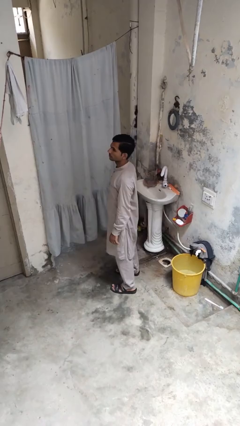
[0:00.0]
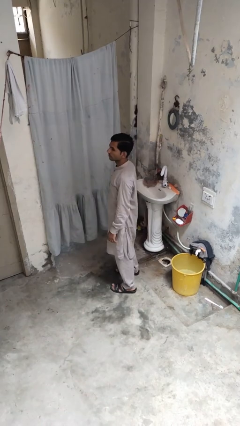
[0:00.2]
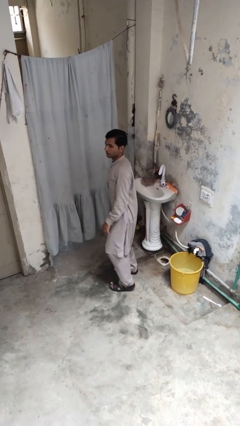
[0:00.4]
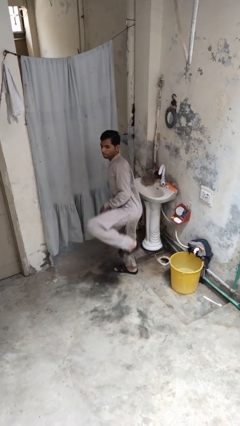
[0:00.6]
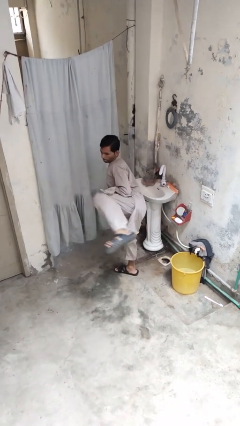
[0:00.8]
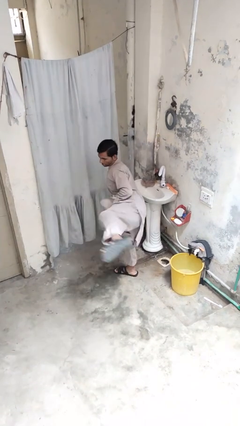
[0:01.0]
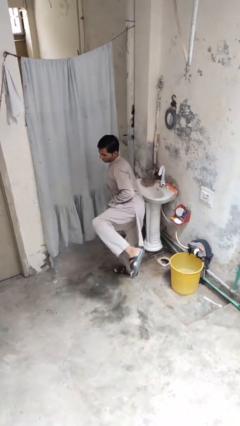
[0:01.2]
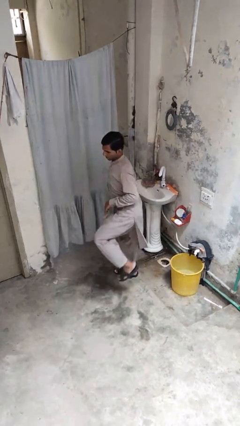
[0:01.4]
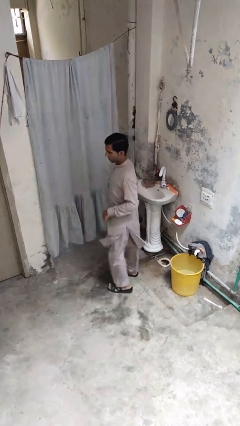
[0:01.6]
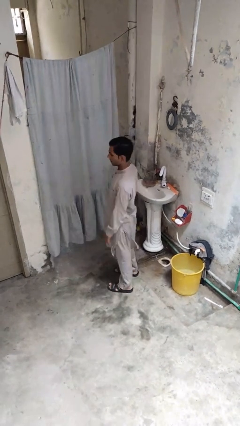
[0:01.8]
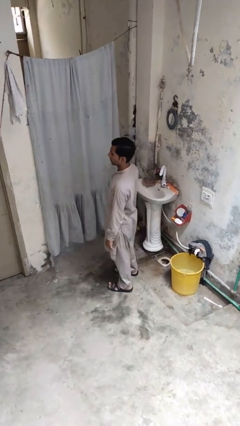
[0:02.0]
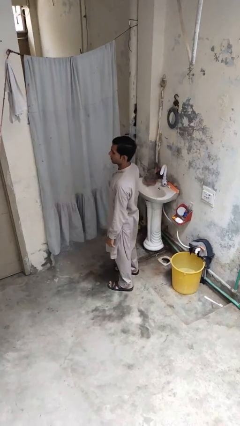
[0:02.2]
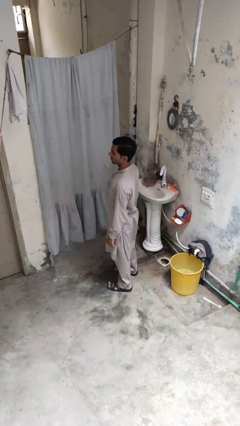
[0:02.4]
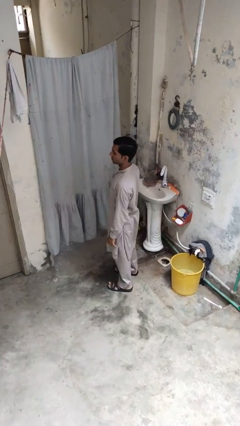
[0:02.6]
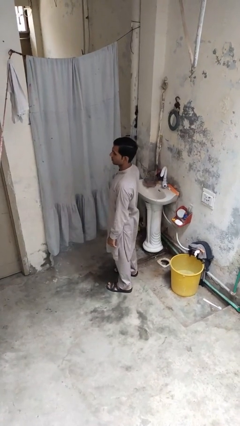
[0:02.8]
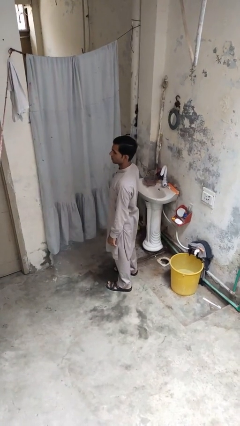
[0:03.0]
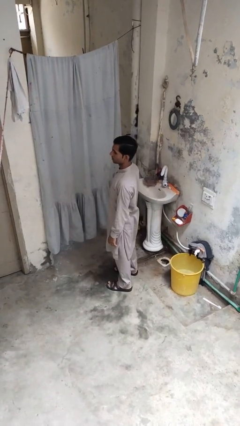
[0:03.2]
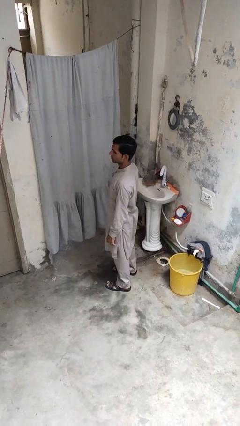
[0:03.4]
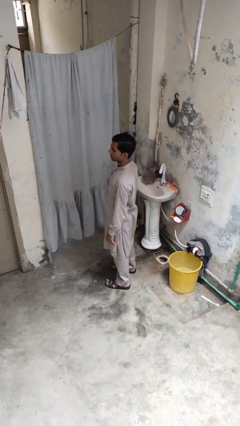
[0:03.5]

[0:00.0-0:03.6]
person karate kicks

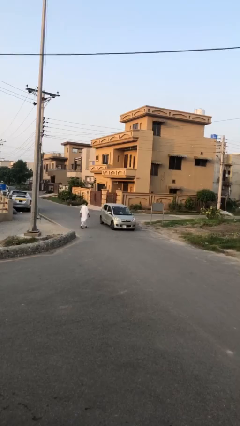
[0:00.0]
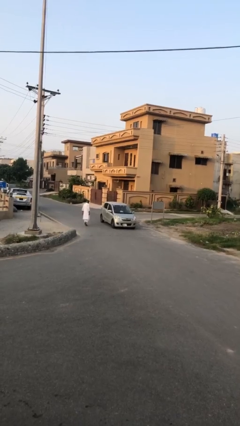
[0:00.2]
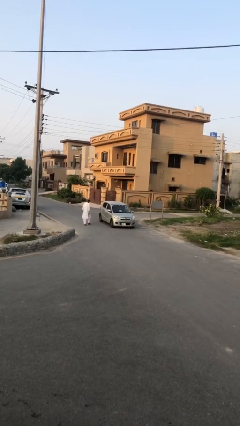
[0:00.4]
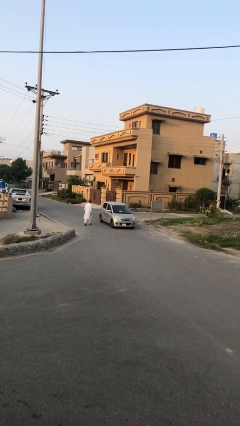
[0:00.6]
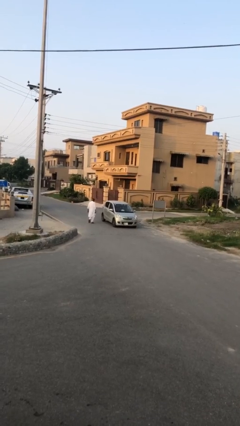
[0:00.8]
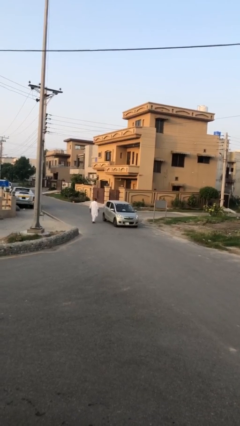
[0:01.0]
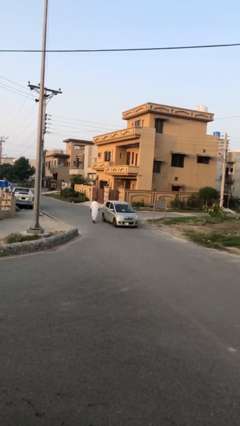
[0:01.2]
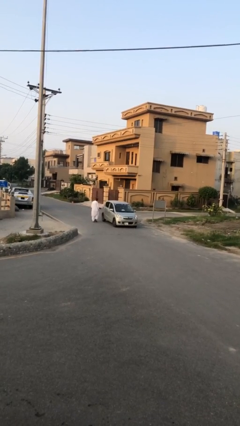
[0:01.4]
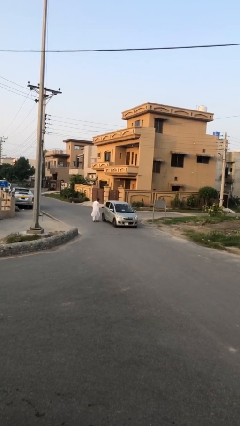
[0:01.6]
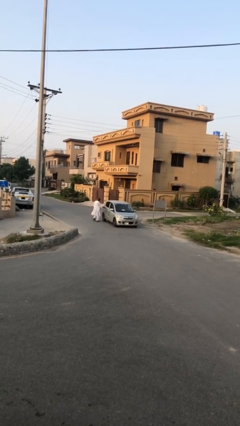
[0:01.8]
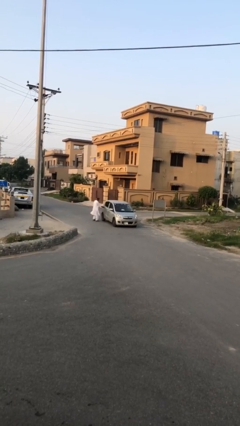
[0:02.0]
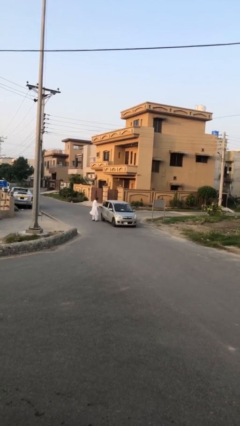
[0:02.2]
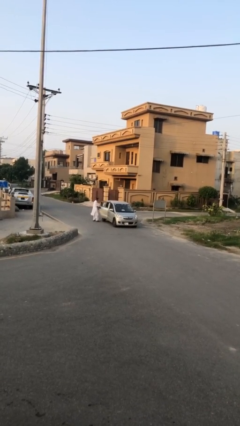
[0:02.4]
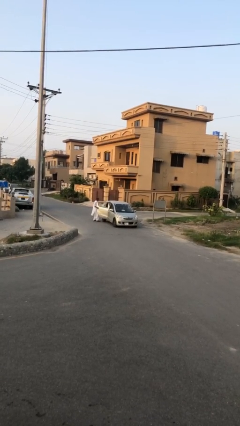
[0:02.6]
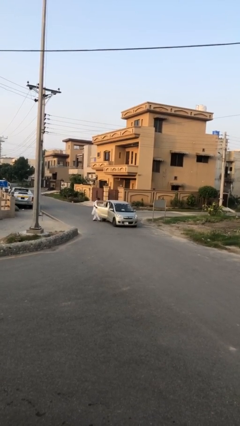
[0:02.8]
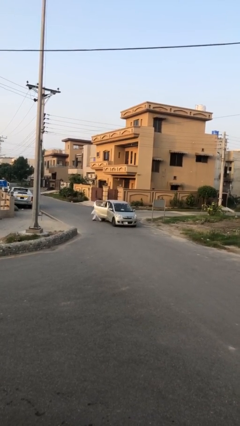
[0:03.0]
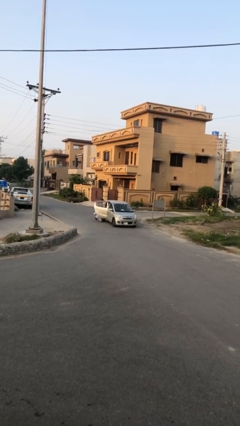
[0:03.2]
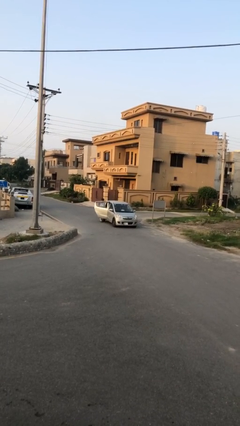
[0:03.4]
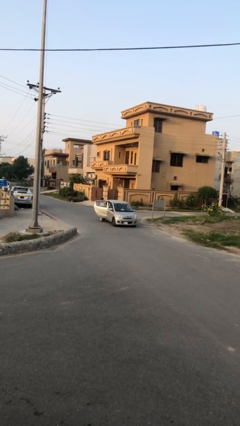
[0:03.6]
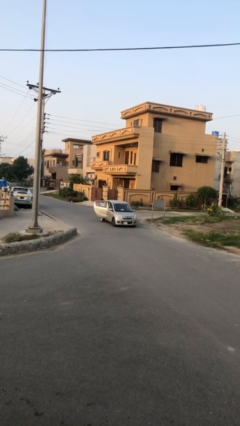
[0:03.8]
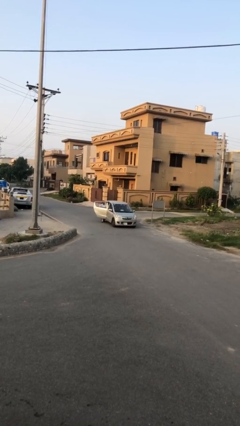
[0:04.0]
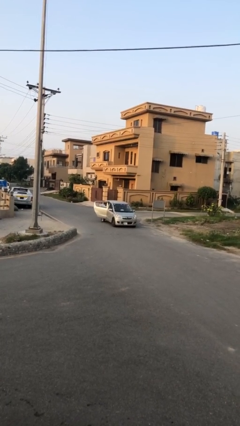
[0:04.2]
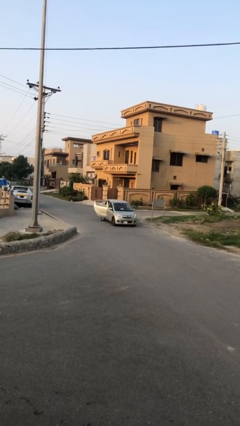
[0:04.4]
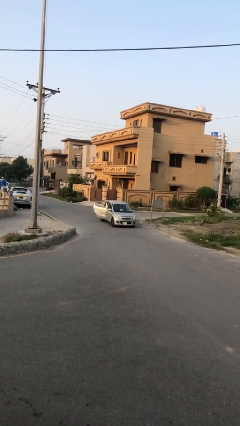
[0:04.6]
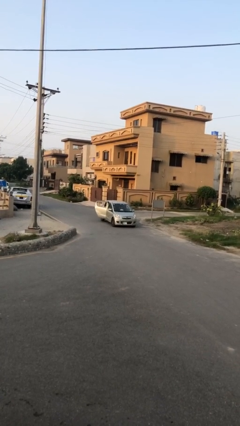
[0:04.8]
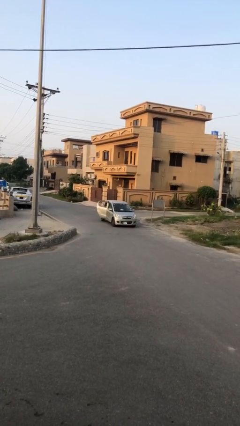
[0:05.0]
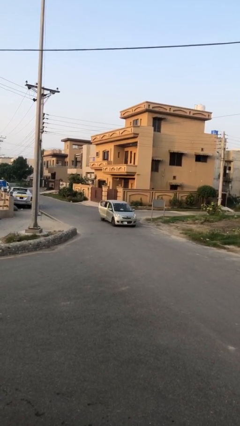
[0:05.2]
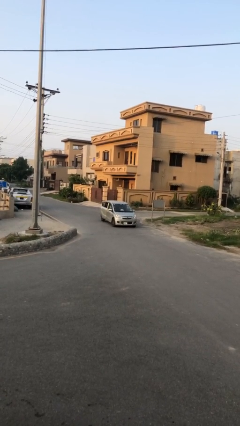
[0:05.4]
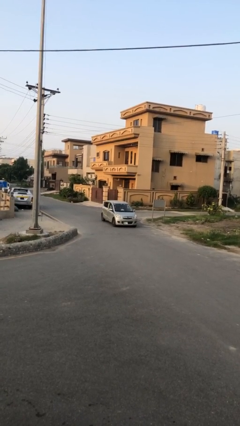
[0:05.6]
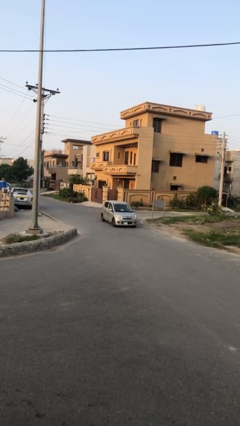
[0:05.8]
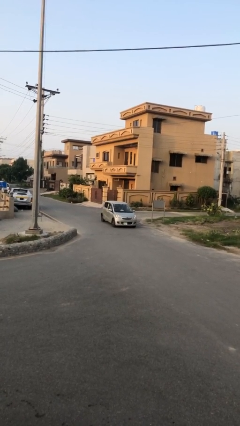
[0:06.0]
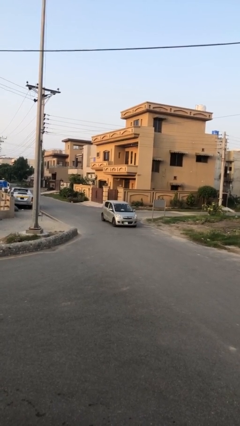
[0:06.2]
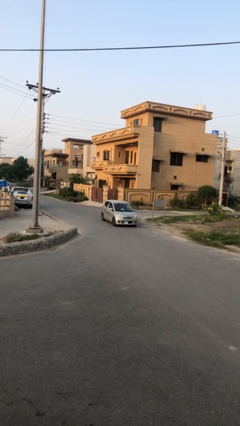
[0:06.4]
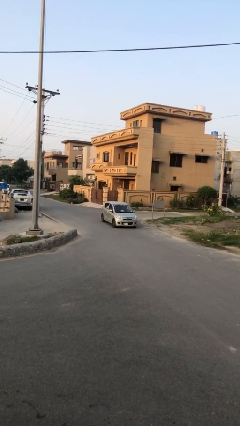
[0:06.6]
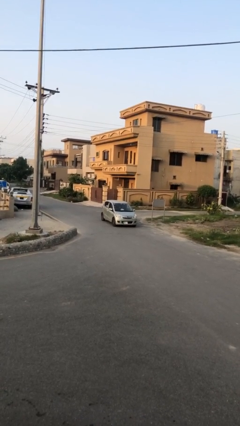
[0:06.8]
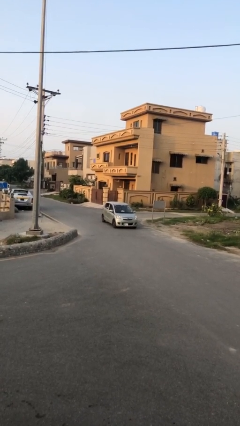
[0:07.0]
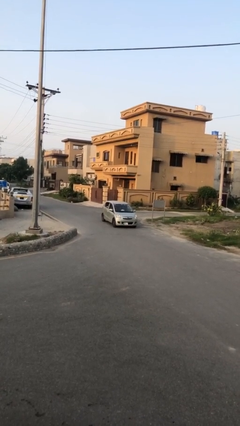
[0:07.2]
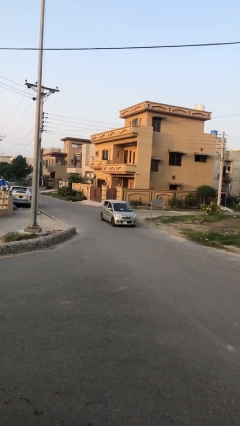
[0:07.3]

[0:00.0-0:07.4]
car picks up person

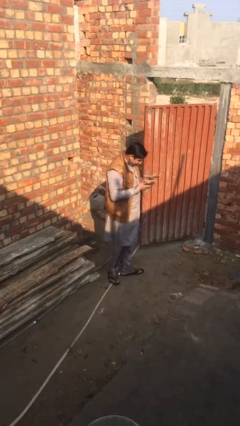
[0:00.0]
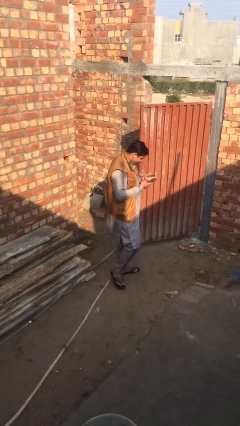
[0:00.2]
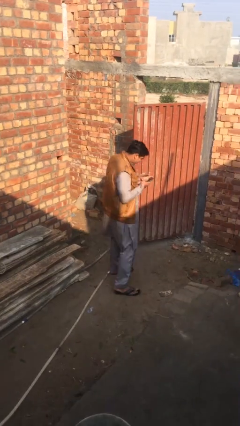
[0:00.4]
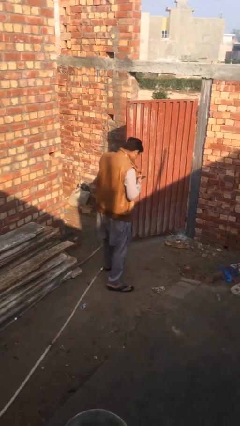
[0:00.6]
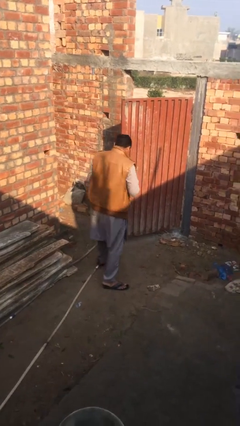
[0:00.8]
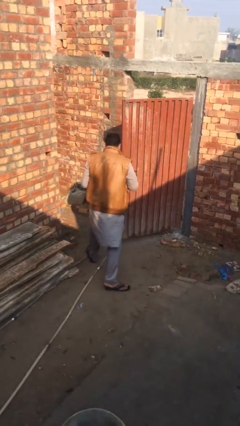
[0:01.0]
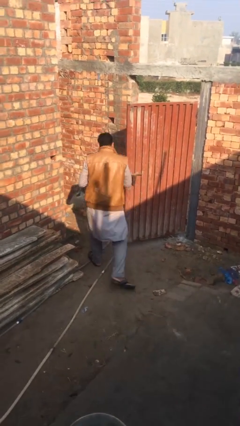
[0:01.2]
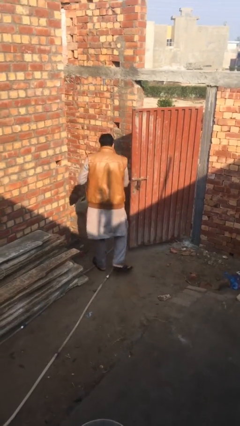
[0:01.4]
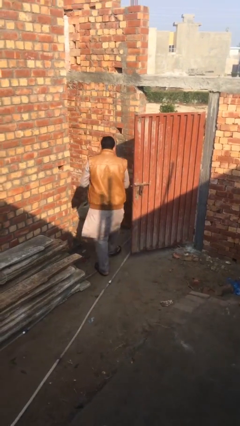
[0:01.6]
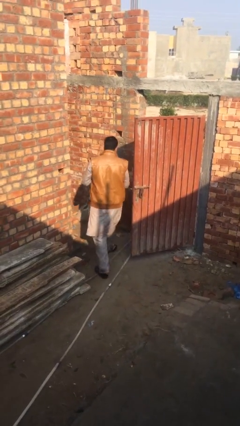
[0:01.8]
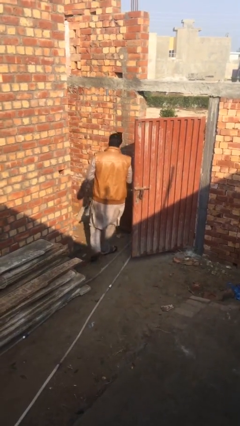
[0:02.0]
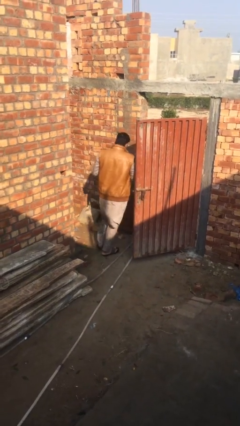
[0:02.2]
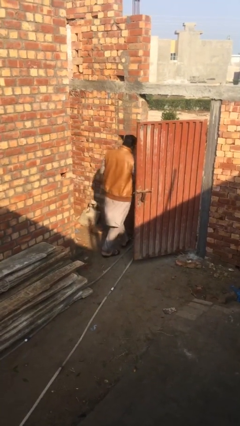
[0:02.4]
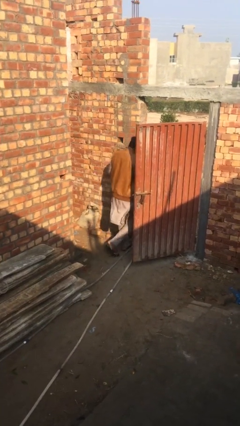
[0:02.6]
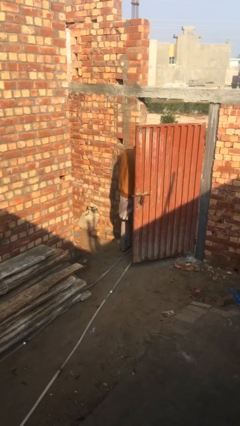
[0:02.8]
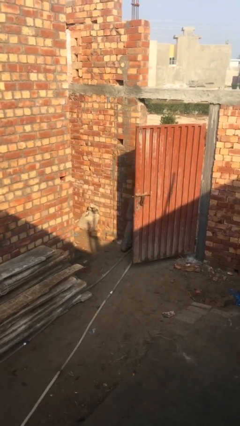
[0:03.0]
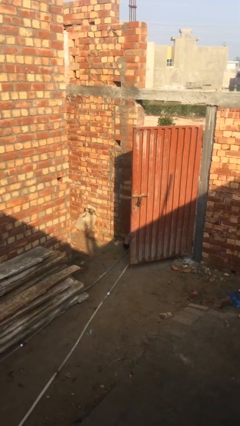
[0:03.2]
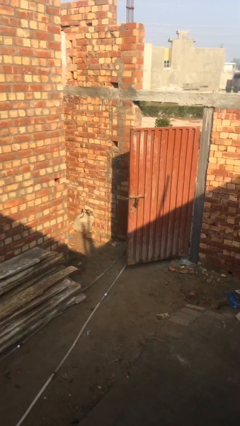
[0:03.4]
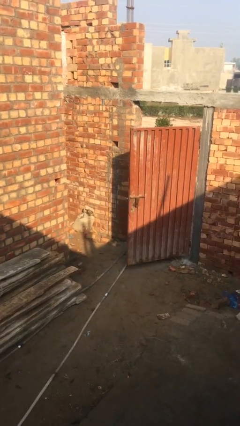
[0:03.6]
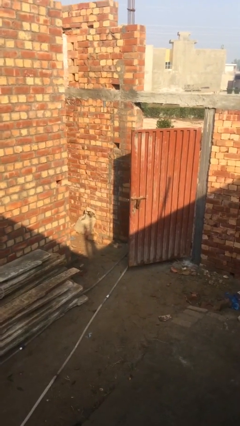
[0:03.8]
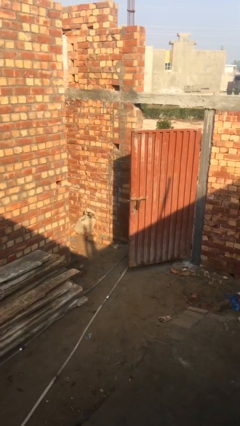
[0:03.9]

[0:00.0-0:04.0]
person exits scene through structure

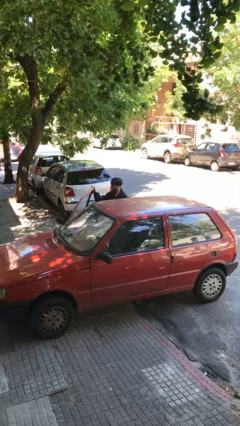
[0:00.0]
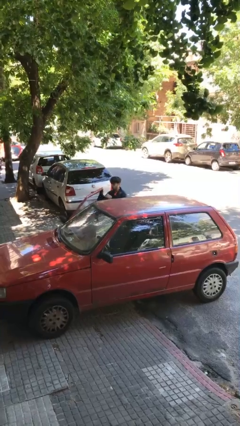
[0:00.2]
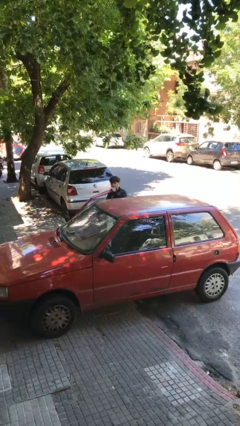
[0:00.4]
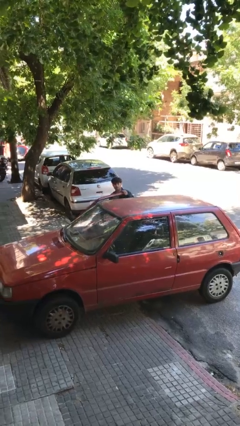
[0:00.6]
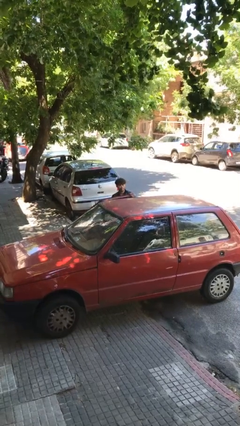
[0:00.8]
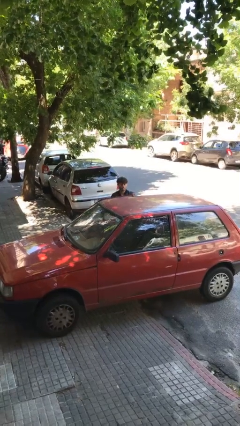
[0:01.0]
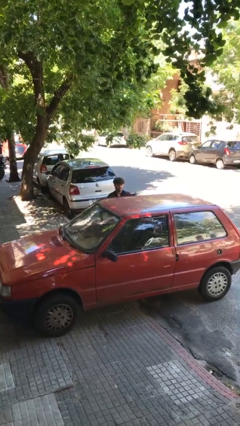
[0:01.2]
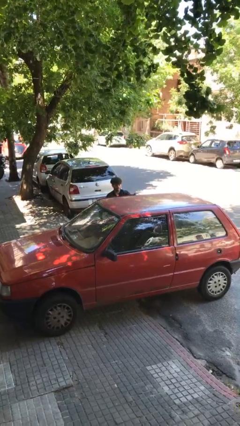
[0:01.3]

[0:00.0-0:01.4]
person closes car door

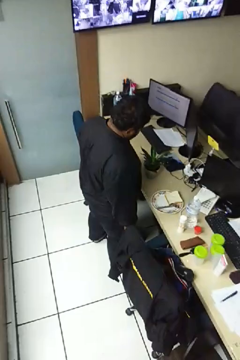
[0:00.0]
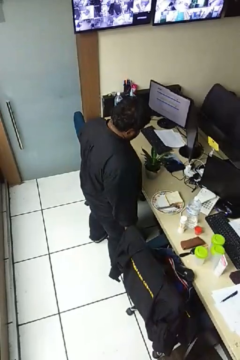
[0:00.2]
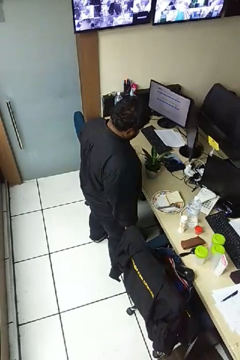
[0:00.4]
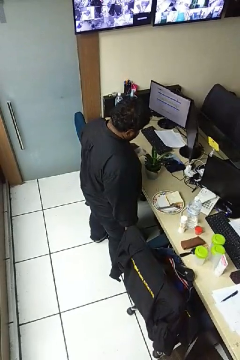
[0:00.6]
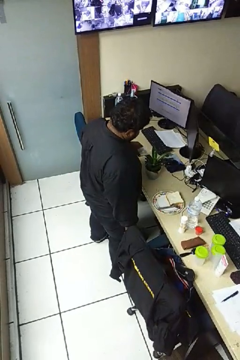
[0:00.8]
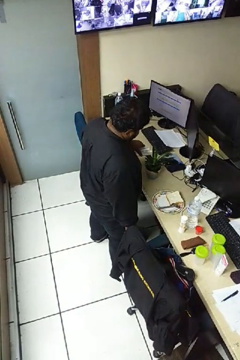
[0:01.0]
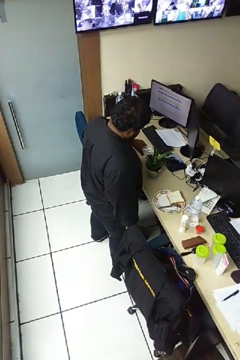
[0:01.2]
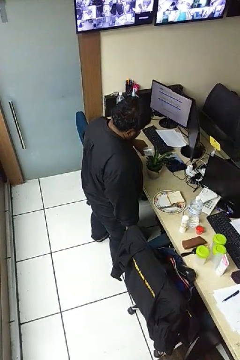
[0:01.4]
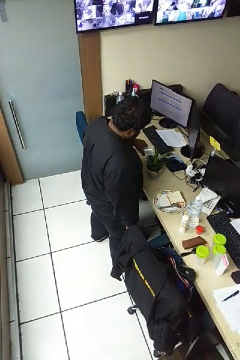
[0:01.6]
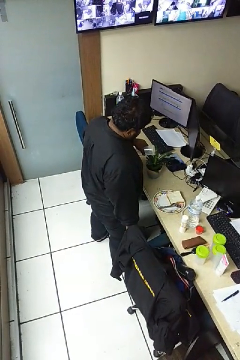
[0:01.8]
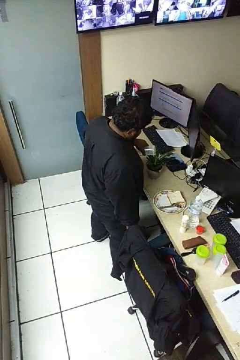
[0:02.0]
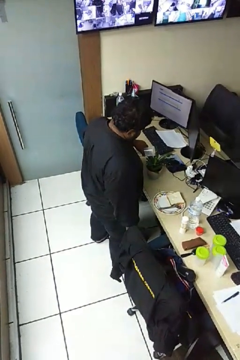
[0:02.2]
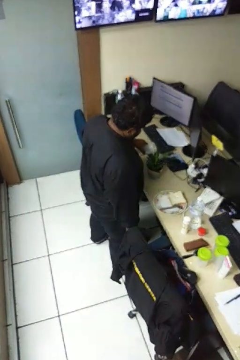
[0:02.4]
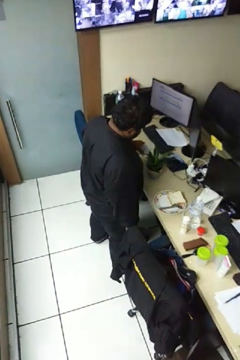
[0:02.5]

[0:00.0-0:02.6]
person waters houseplant
